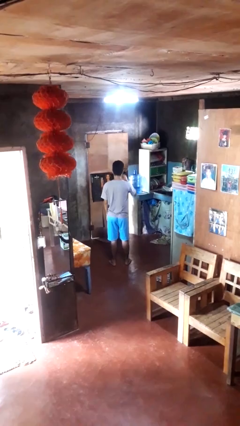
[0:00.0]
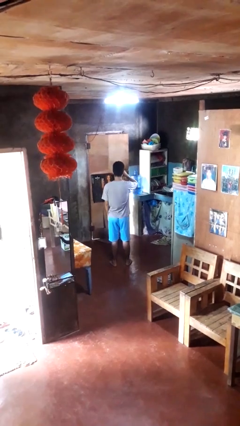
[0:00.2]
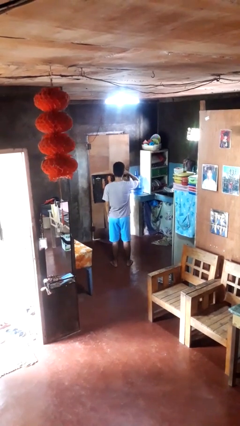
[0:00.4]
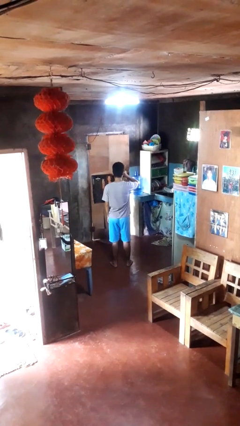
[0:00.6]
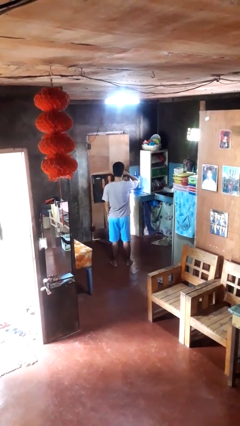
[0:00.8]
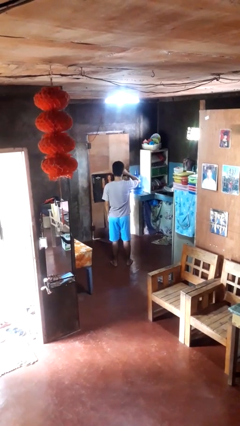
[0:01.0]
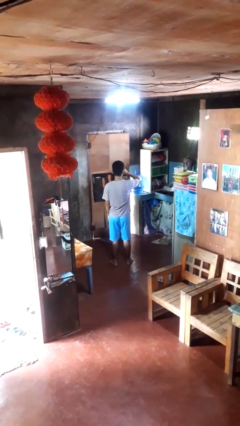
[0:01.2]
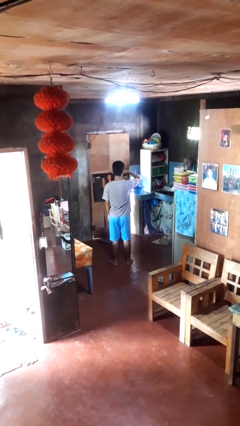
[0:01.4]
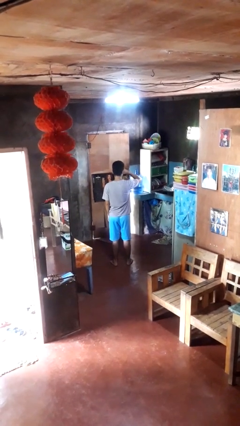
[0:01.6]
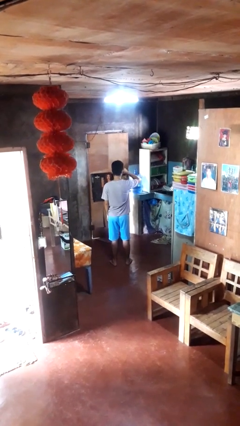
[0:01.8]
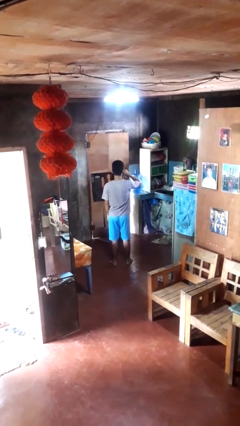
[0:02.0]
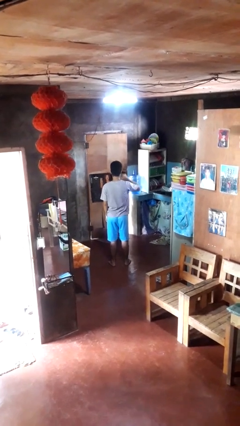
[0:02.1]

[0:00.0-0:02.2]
person rubs eyes

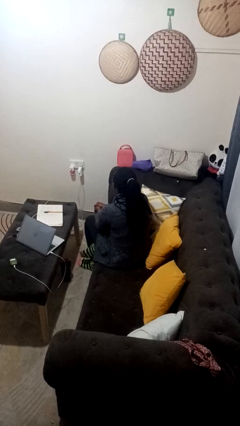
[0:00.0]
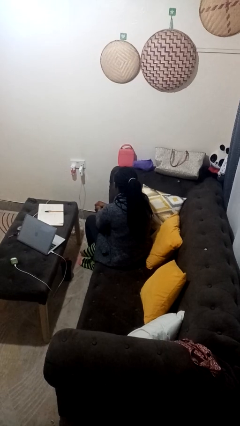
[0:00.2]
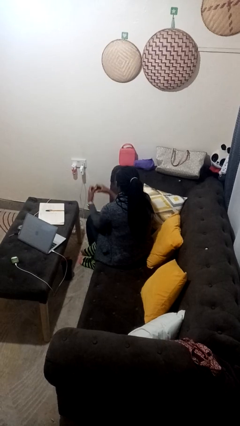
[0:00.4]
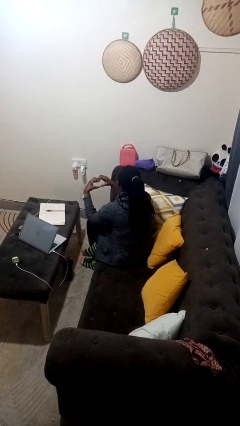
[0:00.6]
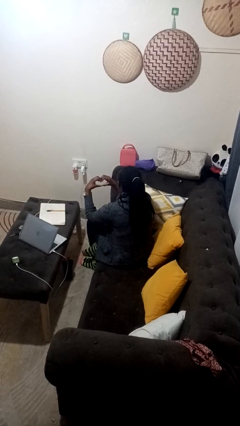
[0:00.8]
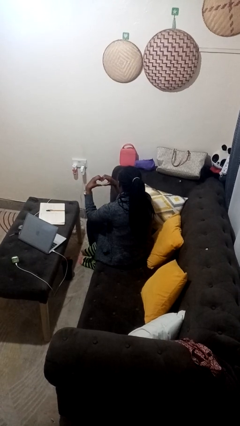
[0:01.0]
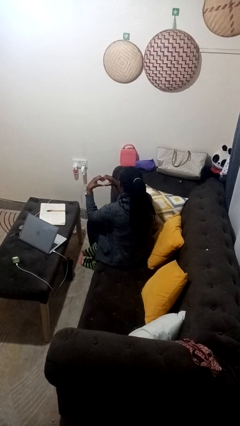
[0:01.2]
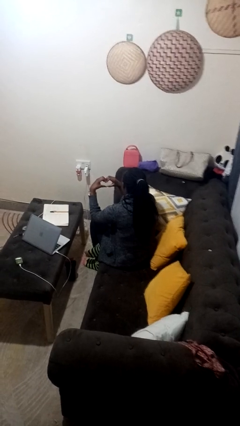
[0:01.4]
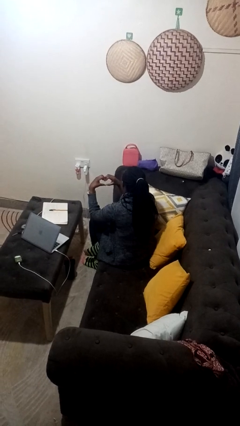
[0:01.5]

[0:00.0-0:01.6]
person gestures heart

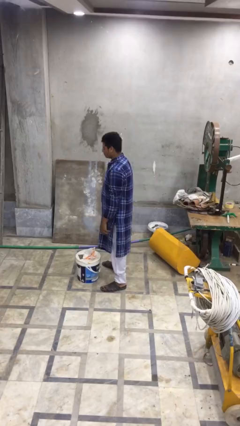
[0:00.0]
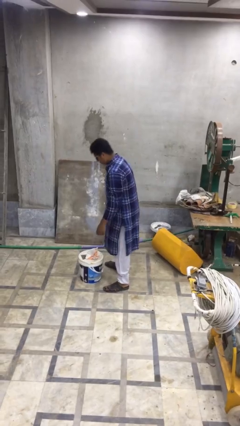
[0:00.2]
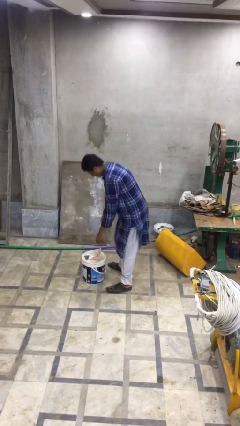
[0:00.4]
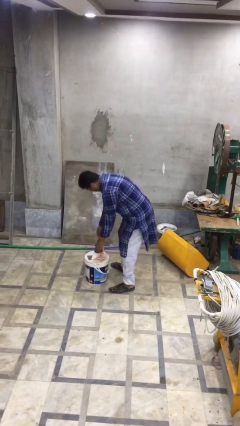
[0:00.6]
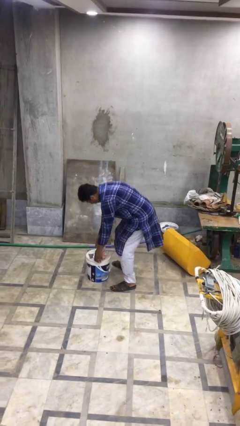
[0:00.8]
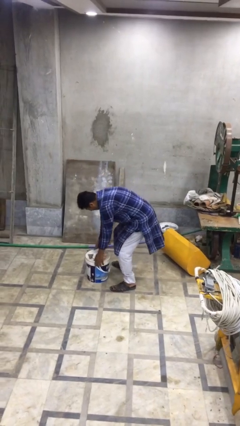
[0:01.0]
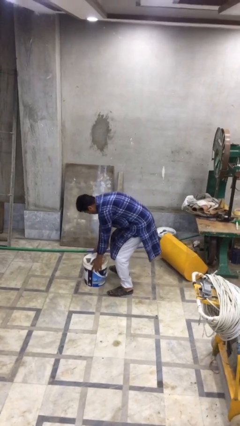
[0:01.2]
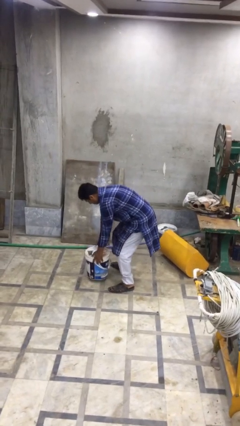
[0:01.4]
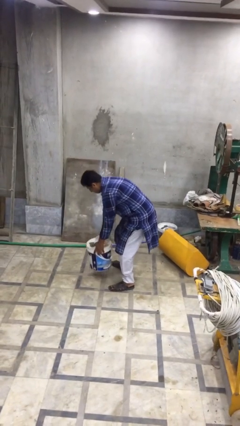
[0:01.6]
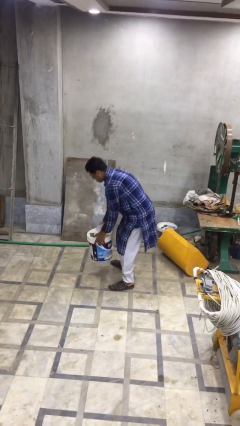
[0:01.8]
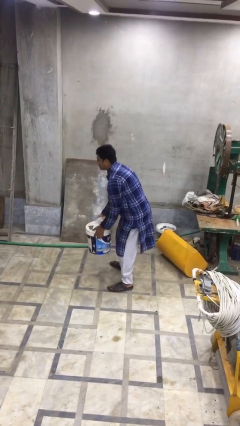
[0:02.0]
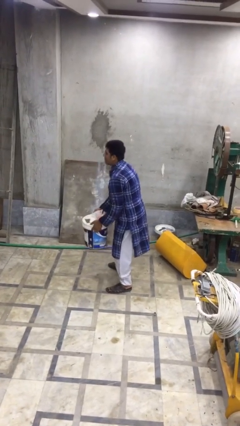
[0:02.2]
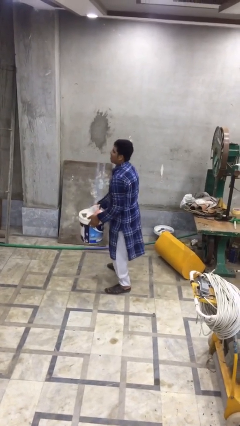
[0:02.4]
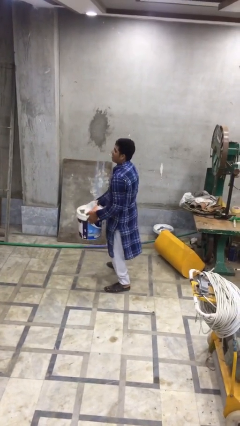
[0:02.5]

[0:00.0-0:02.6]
person picks up object from floor

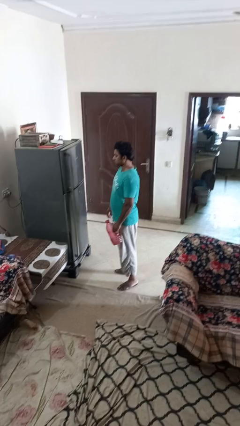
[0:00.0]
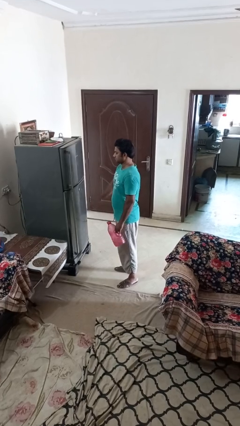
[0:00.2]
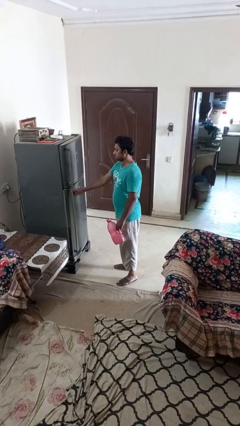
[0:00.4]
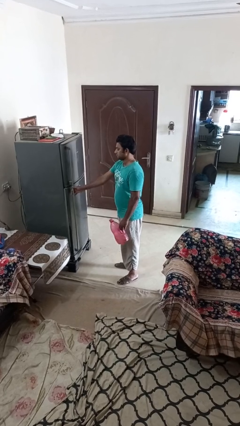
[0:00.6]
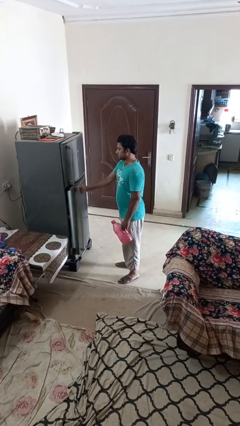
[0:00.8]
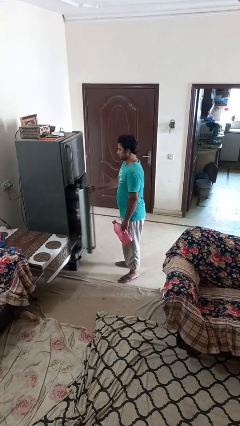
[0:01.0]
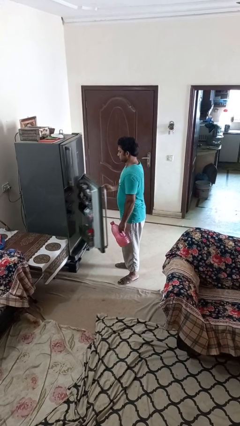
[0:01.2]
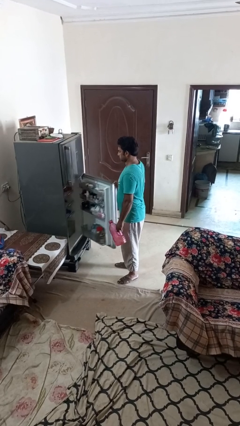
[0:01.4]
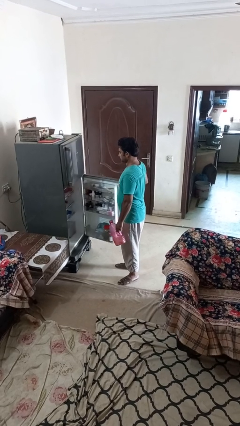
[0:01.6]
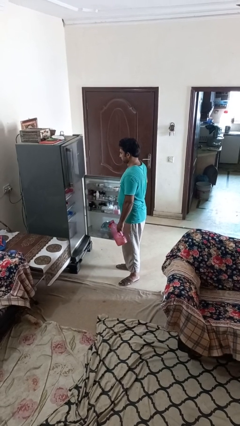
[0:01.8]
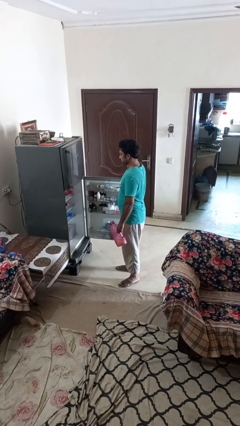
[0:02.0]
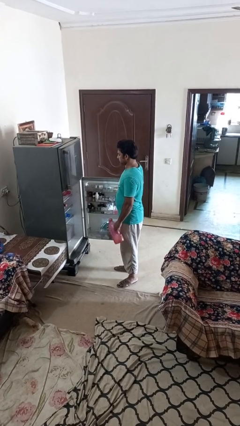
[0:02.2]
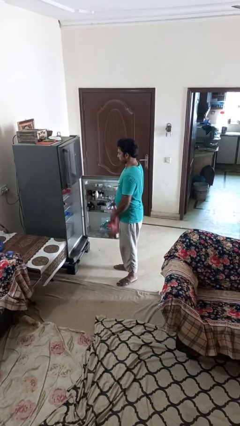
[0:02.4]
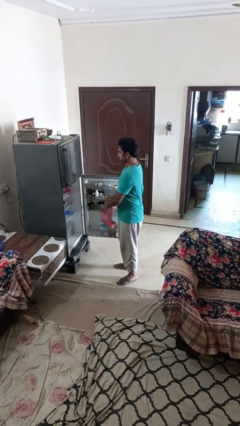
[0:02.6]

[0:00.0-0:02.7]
person opens refrigerator

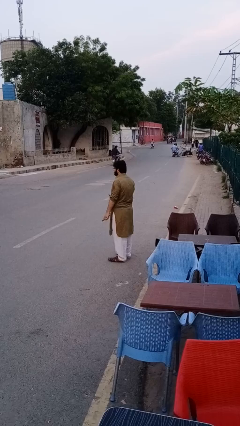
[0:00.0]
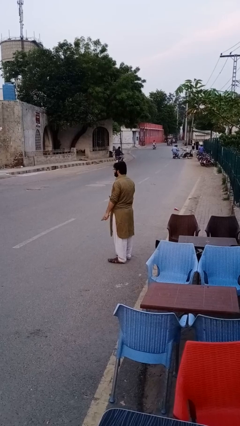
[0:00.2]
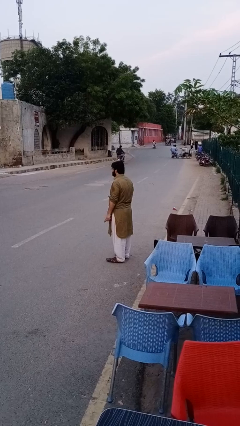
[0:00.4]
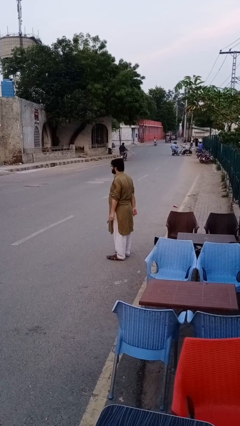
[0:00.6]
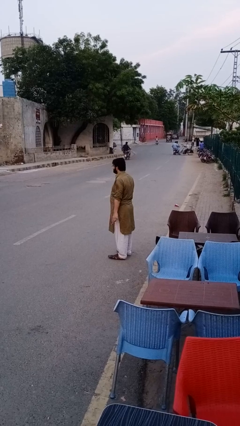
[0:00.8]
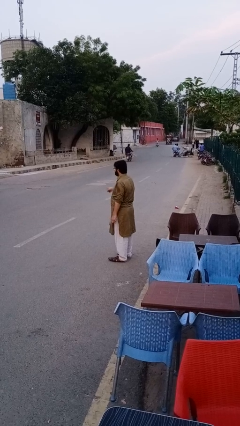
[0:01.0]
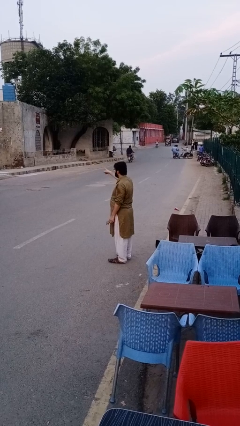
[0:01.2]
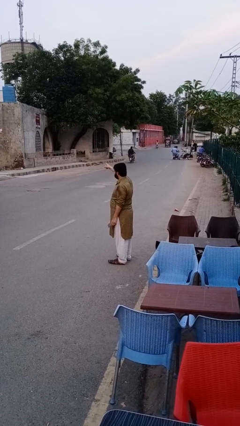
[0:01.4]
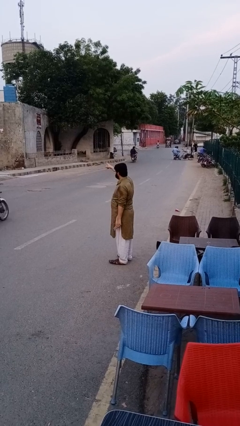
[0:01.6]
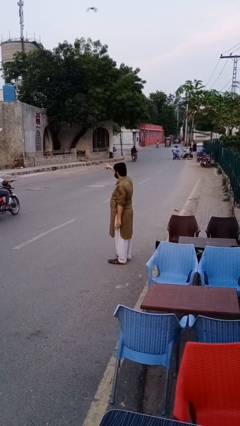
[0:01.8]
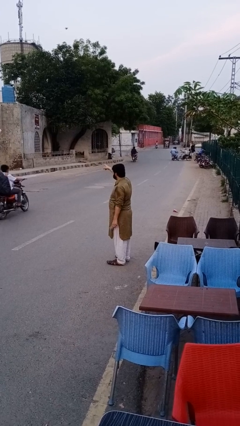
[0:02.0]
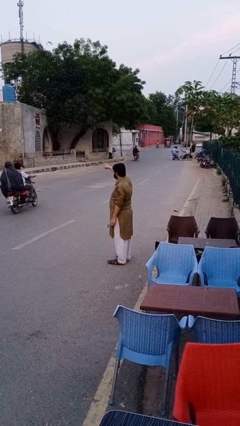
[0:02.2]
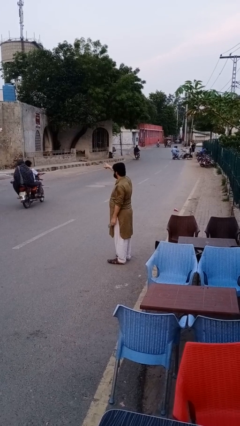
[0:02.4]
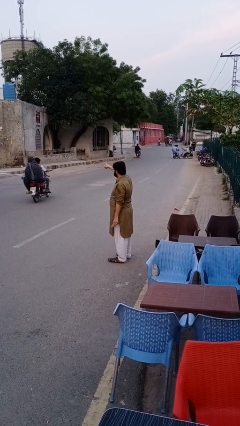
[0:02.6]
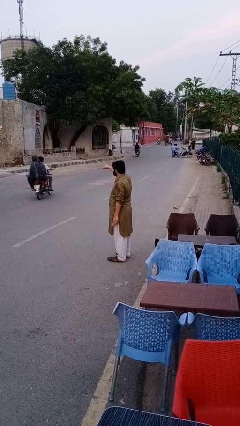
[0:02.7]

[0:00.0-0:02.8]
person takes phone from pocket

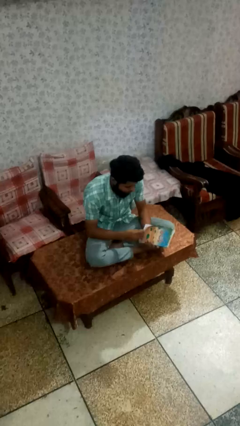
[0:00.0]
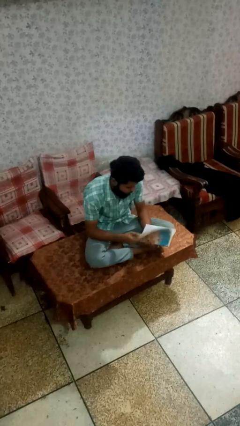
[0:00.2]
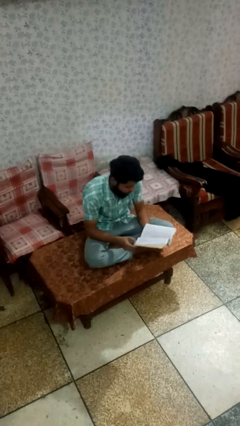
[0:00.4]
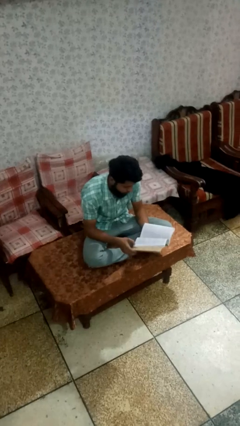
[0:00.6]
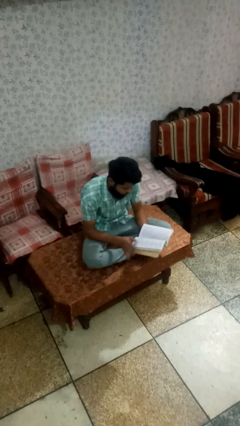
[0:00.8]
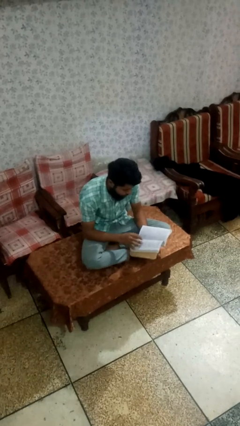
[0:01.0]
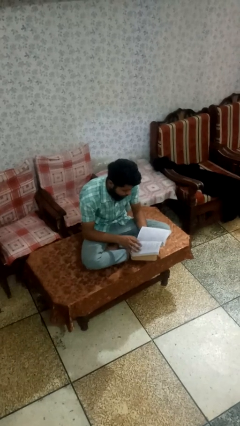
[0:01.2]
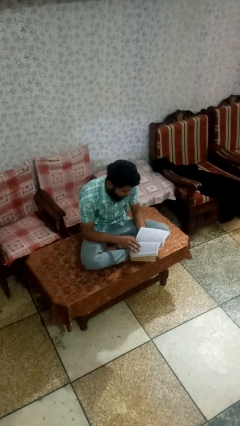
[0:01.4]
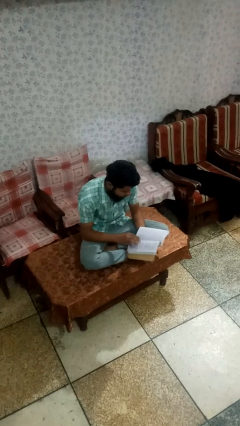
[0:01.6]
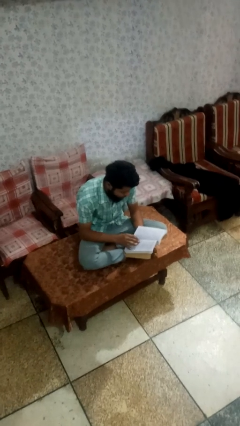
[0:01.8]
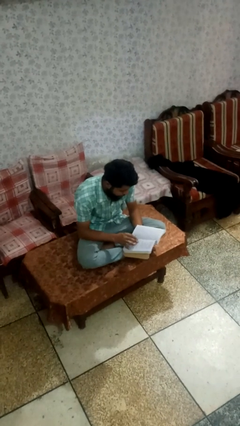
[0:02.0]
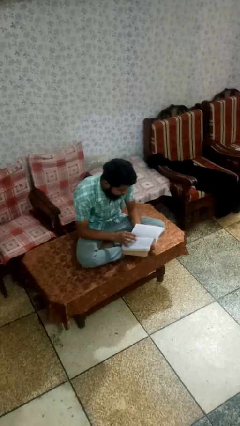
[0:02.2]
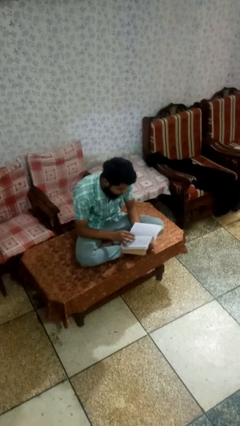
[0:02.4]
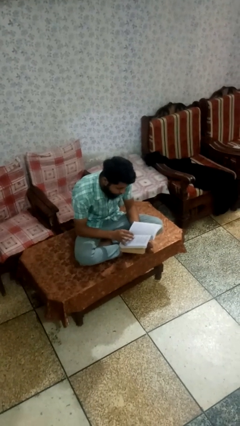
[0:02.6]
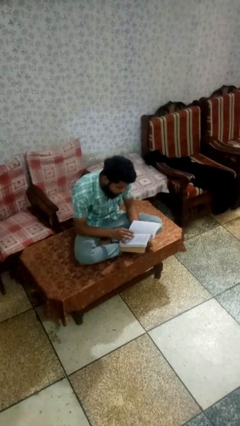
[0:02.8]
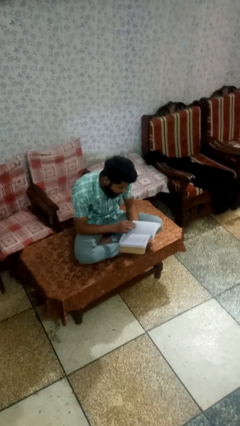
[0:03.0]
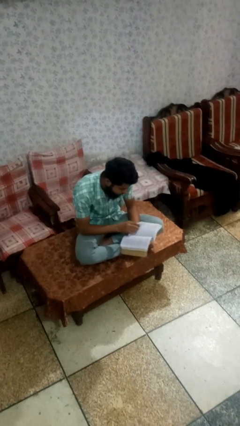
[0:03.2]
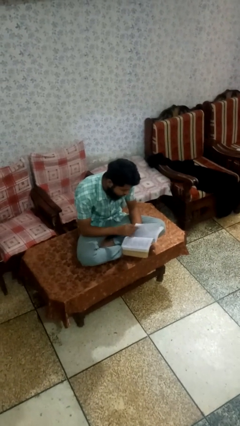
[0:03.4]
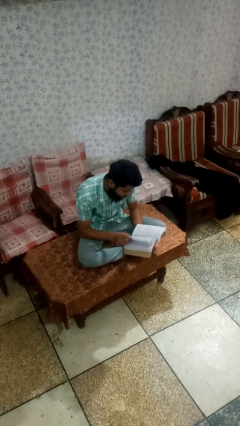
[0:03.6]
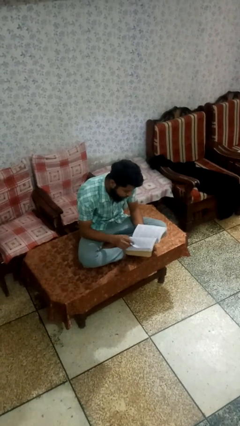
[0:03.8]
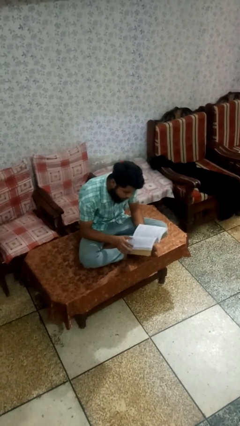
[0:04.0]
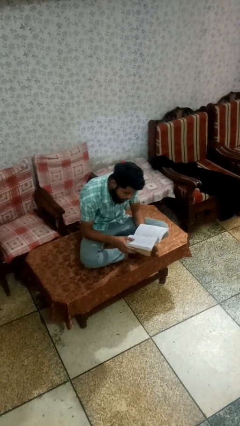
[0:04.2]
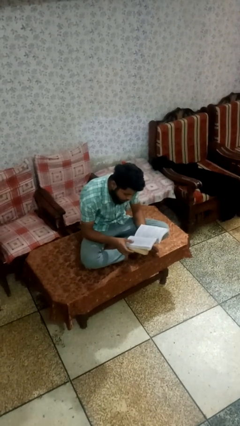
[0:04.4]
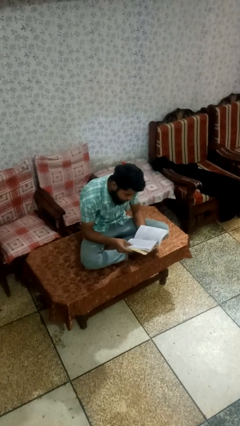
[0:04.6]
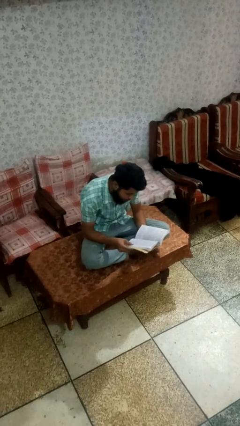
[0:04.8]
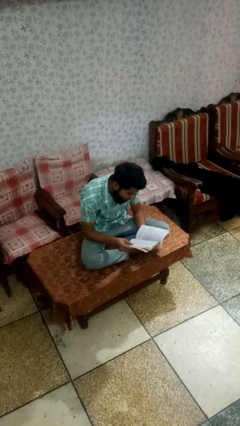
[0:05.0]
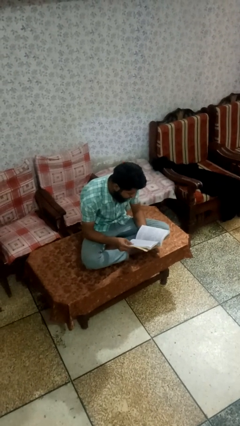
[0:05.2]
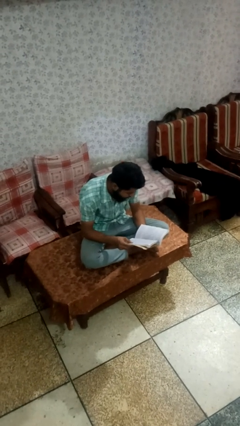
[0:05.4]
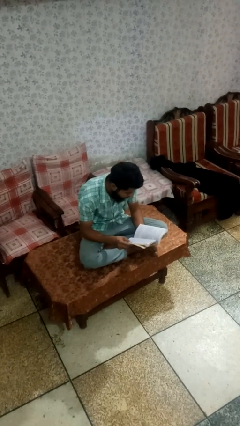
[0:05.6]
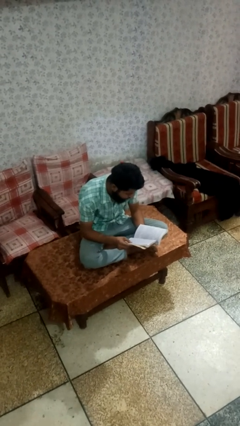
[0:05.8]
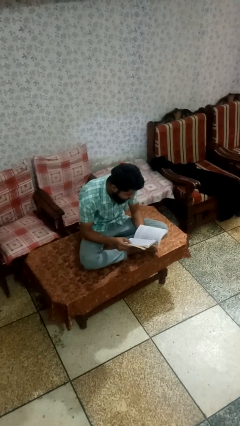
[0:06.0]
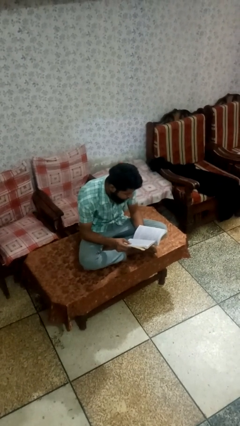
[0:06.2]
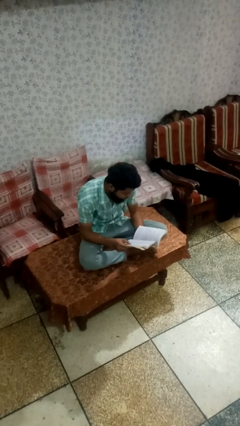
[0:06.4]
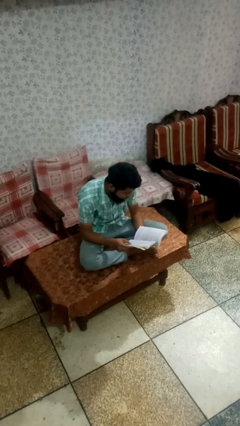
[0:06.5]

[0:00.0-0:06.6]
person reads book
